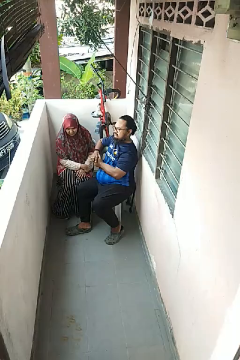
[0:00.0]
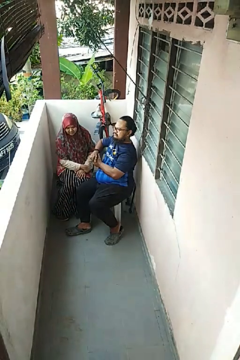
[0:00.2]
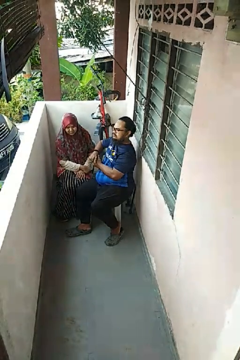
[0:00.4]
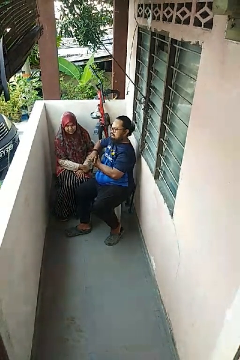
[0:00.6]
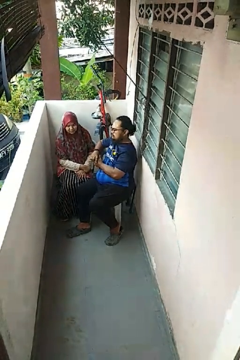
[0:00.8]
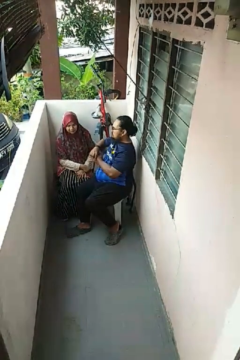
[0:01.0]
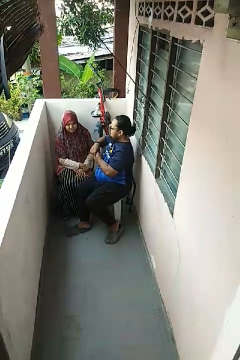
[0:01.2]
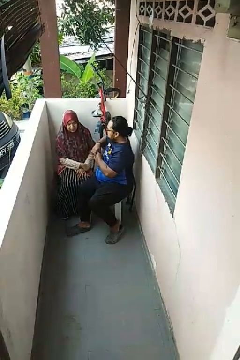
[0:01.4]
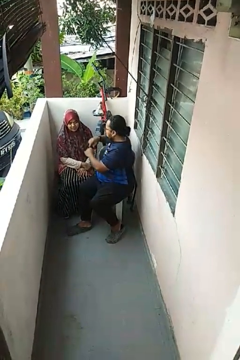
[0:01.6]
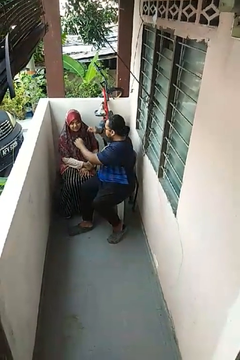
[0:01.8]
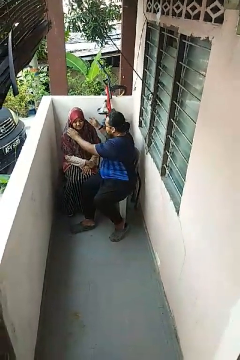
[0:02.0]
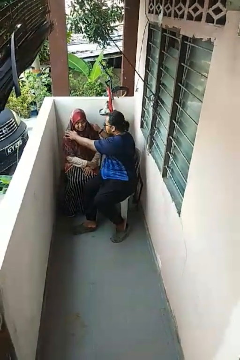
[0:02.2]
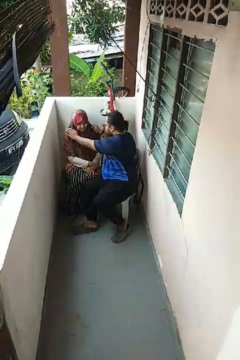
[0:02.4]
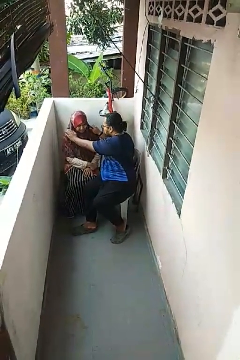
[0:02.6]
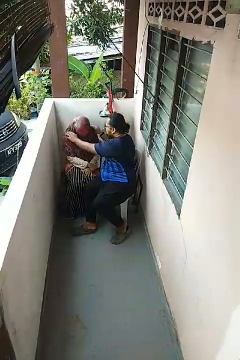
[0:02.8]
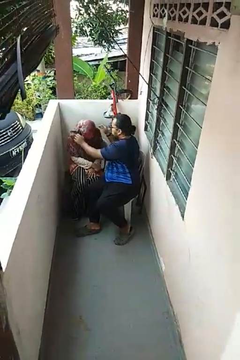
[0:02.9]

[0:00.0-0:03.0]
person pounds shoulders of person

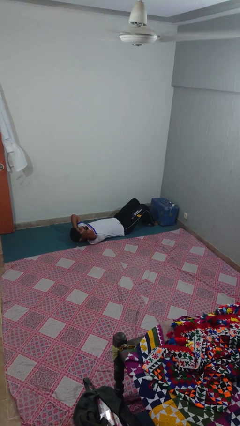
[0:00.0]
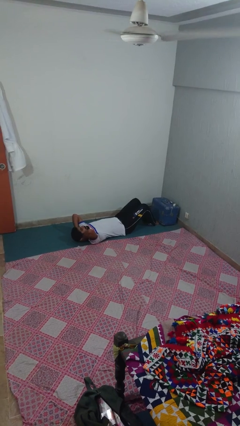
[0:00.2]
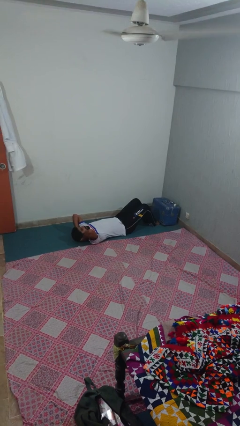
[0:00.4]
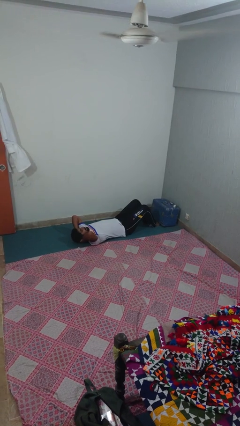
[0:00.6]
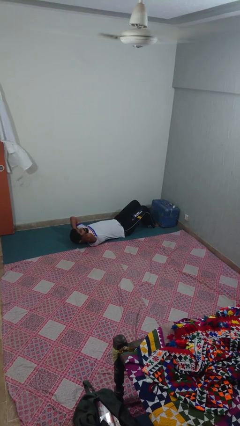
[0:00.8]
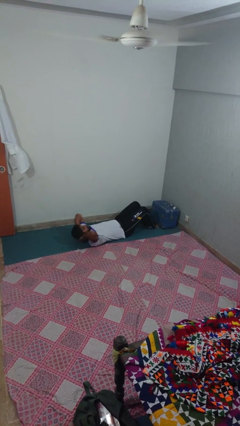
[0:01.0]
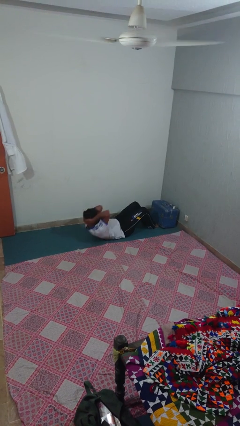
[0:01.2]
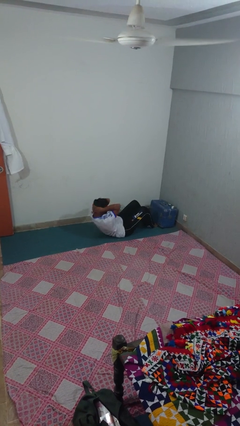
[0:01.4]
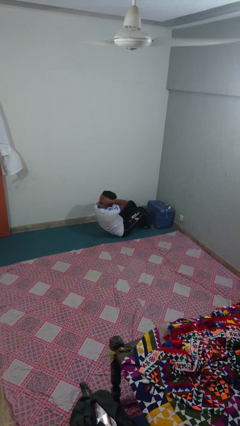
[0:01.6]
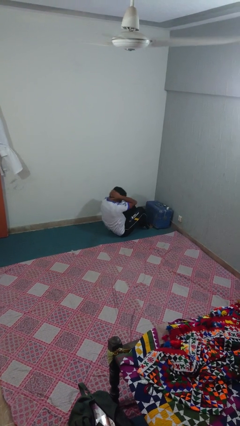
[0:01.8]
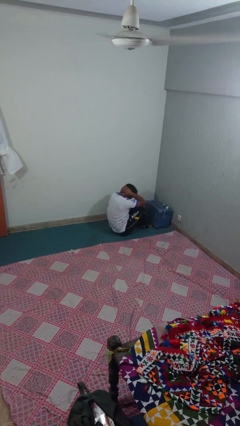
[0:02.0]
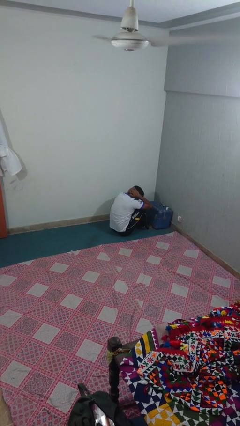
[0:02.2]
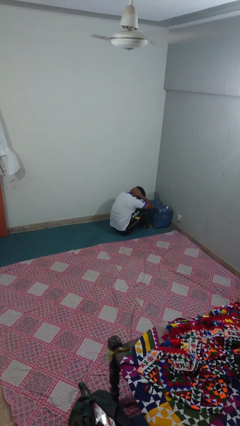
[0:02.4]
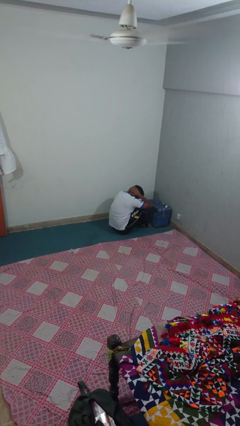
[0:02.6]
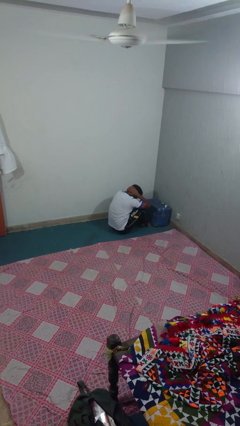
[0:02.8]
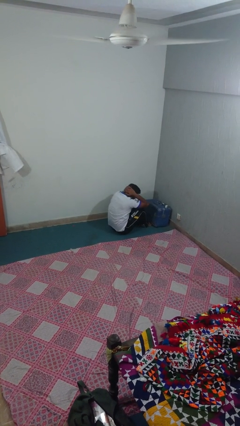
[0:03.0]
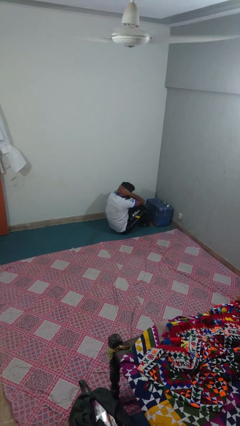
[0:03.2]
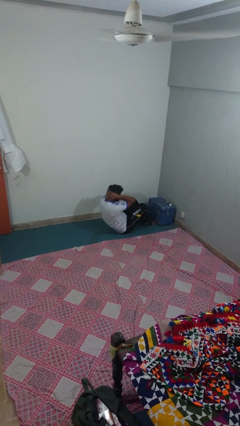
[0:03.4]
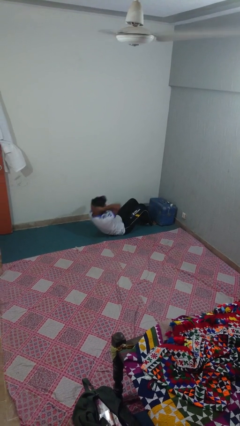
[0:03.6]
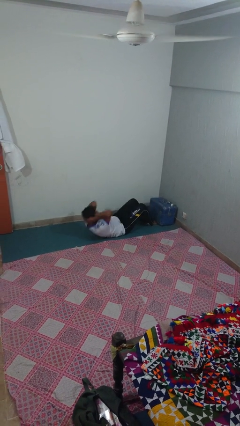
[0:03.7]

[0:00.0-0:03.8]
person exercises with situp

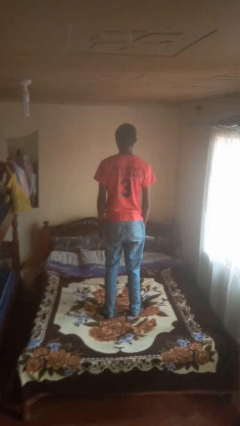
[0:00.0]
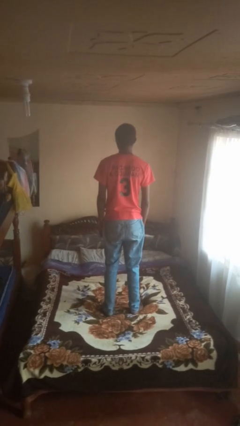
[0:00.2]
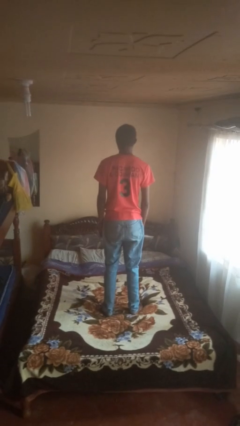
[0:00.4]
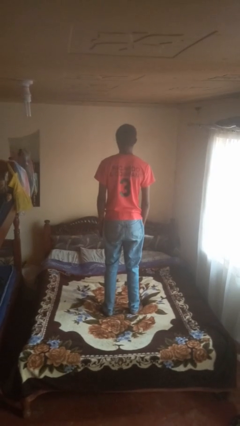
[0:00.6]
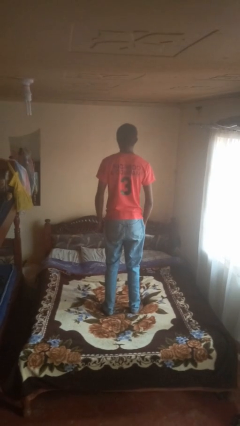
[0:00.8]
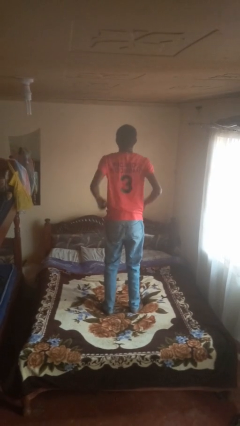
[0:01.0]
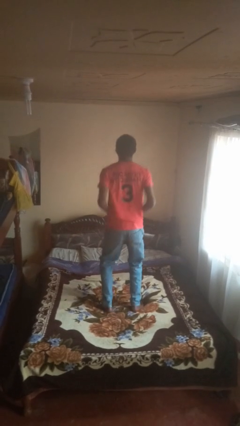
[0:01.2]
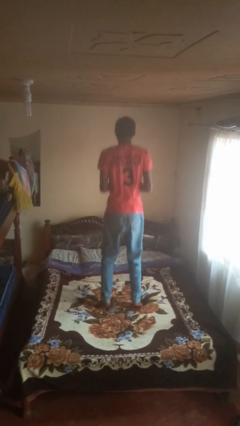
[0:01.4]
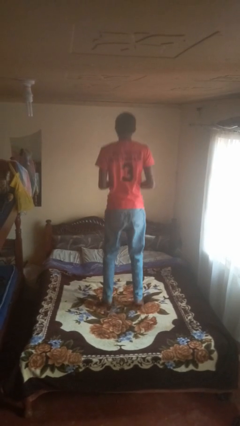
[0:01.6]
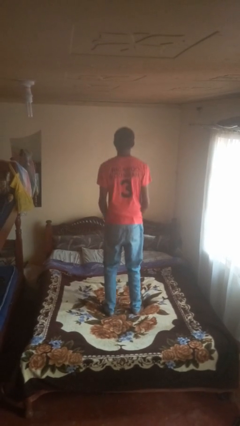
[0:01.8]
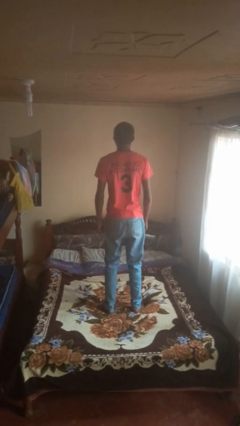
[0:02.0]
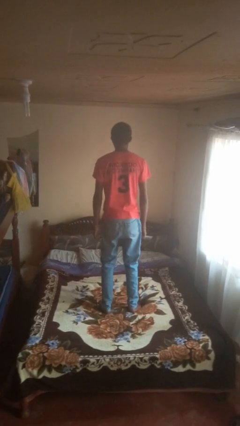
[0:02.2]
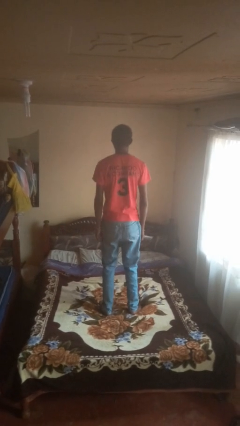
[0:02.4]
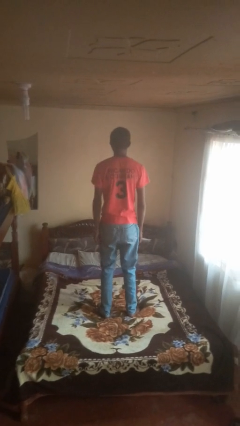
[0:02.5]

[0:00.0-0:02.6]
person jumps on bed

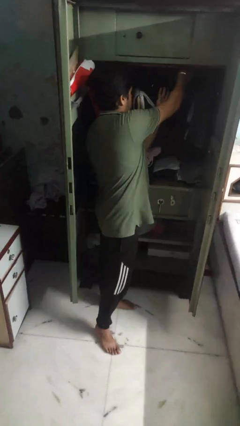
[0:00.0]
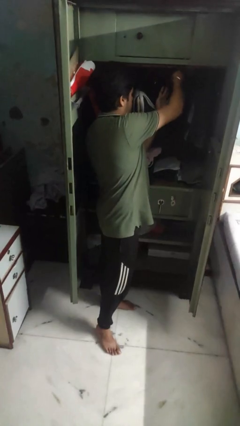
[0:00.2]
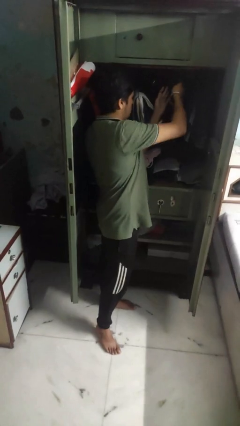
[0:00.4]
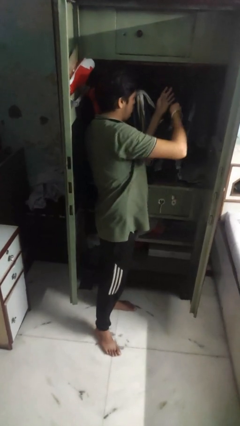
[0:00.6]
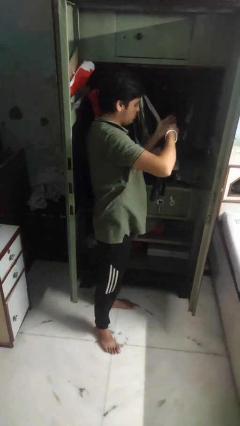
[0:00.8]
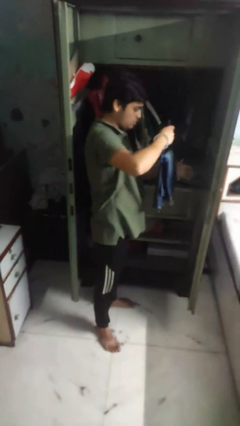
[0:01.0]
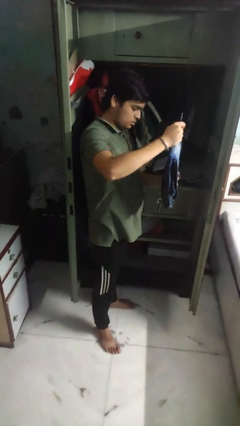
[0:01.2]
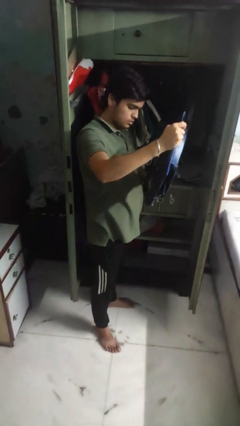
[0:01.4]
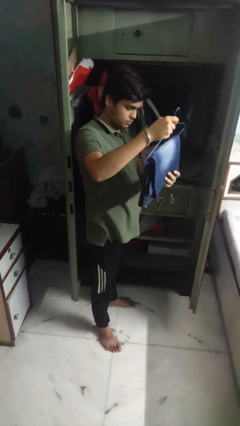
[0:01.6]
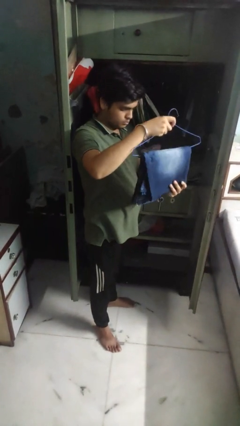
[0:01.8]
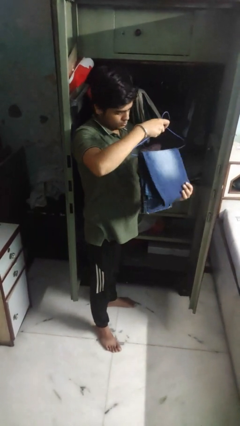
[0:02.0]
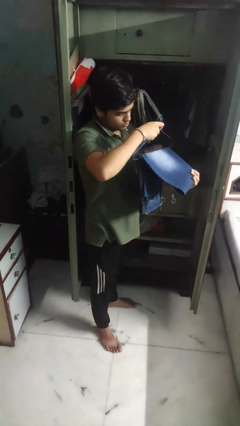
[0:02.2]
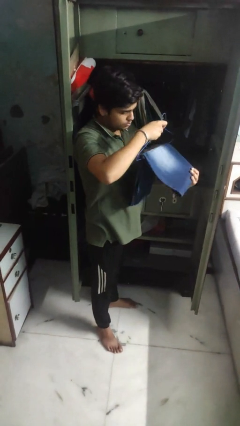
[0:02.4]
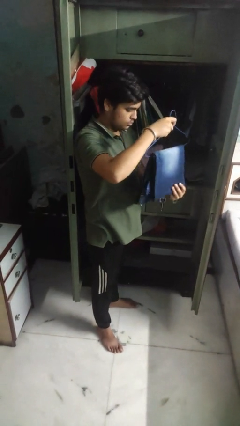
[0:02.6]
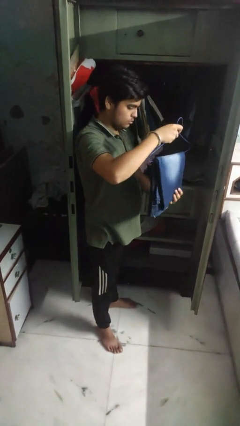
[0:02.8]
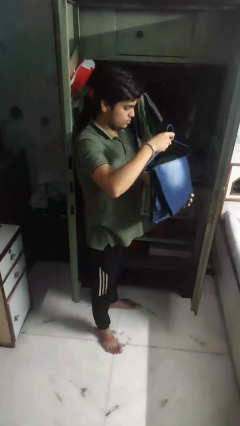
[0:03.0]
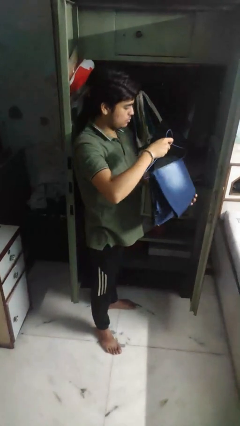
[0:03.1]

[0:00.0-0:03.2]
person takes clothes from closet

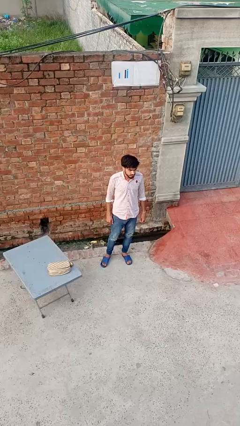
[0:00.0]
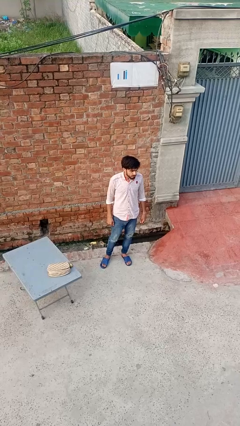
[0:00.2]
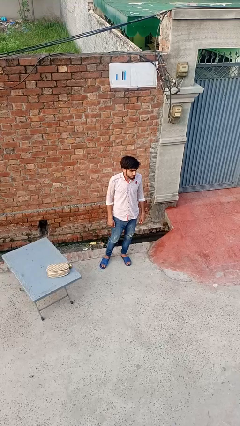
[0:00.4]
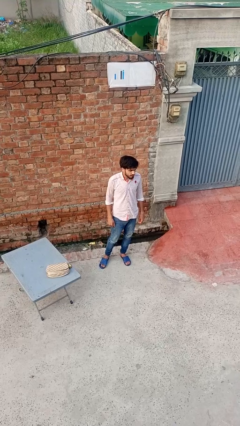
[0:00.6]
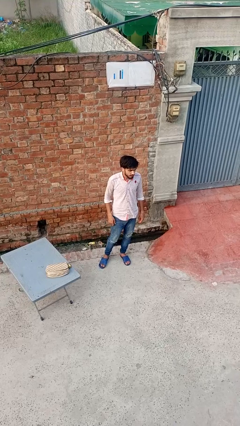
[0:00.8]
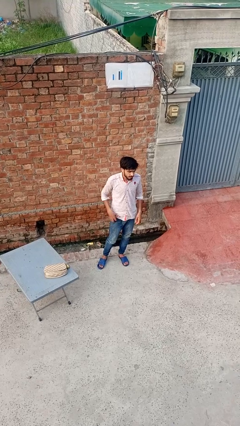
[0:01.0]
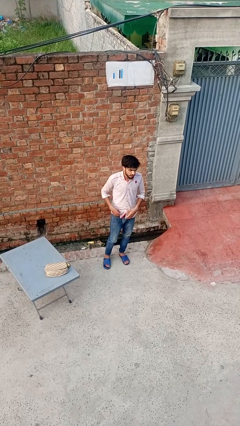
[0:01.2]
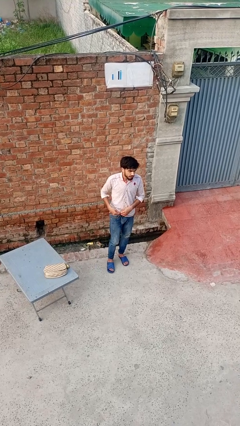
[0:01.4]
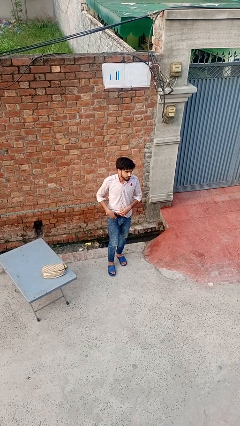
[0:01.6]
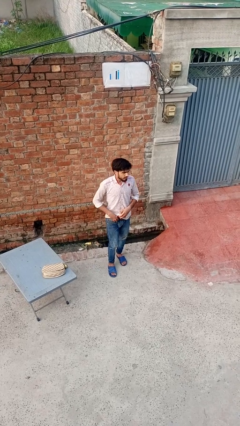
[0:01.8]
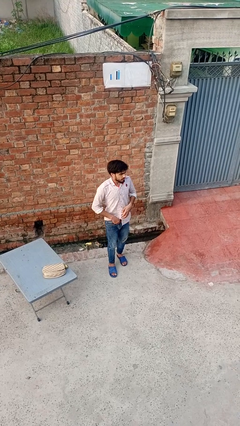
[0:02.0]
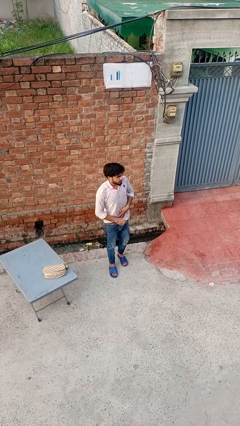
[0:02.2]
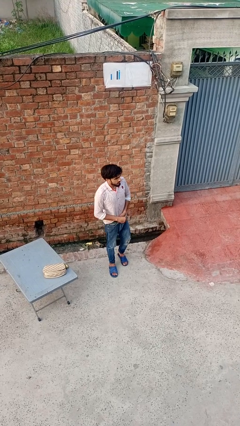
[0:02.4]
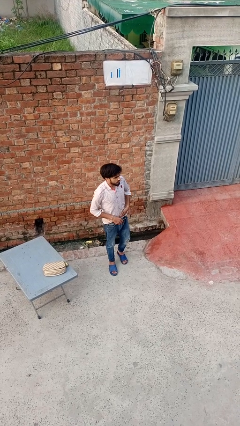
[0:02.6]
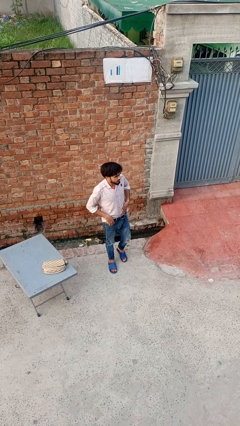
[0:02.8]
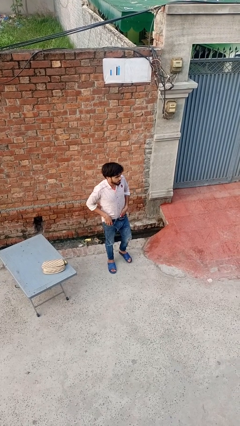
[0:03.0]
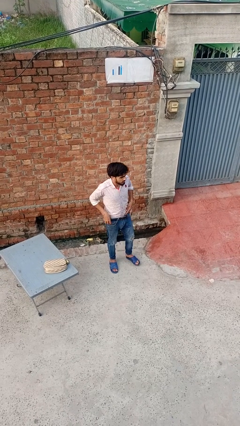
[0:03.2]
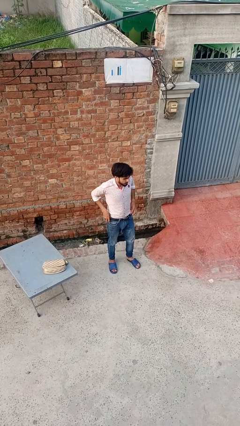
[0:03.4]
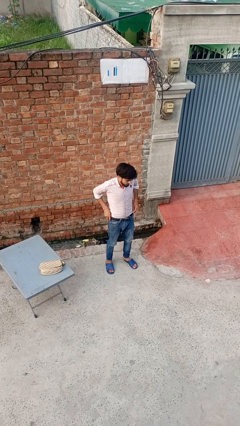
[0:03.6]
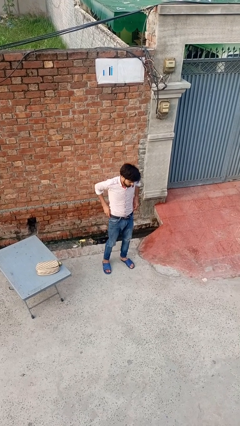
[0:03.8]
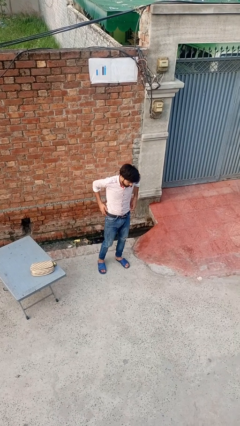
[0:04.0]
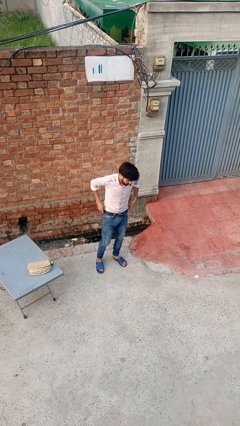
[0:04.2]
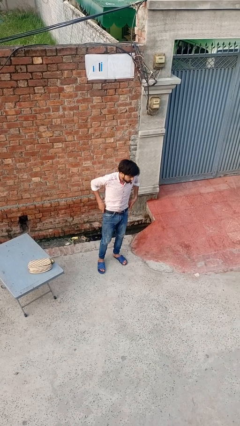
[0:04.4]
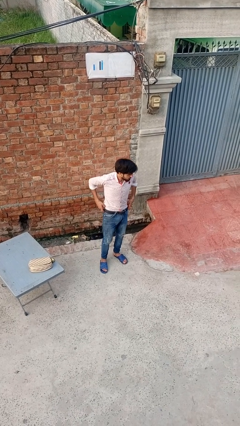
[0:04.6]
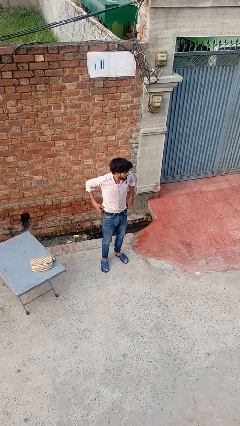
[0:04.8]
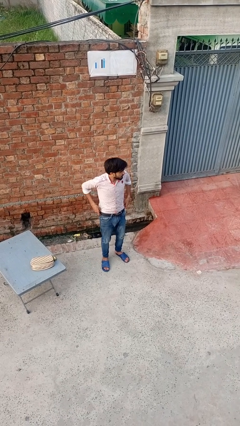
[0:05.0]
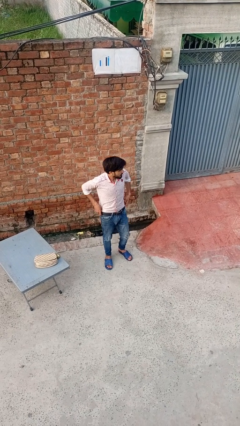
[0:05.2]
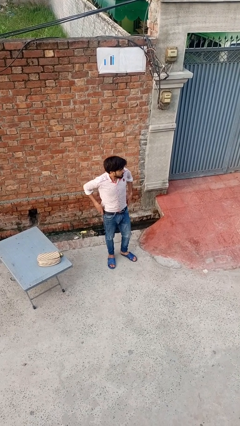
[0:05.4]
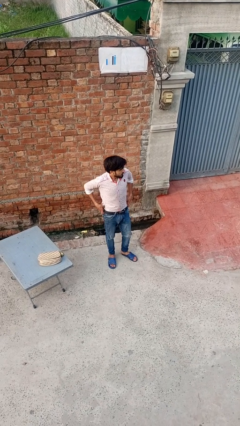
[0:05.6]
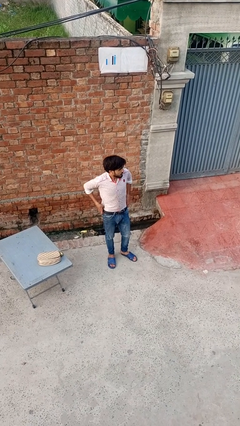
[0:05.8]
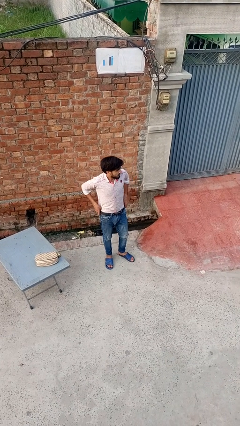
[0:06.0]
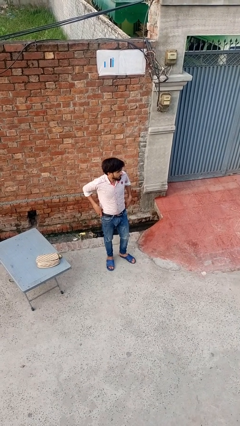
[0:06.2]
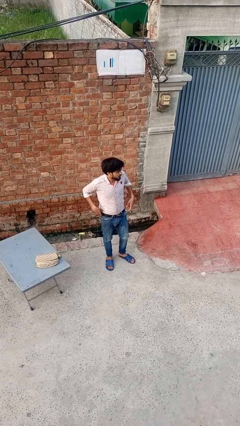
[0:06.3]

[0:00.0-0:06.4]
person tucks in shirt
